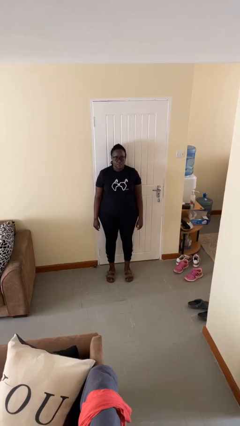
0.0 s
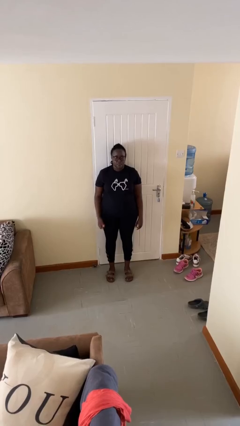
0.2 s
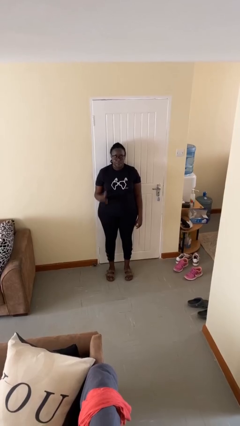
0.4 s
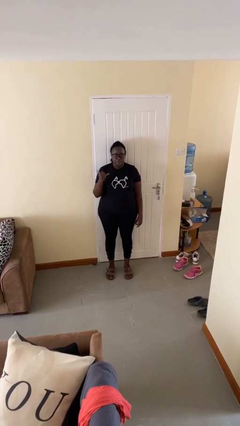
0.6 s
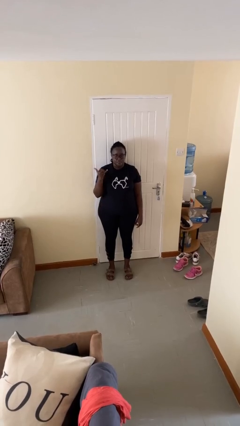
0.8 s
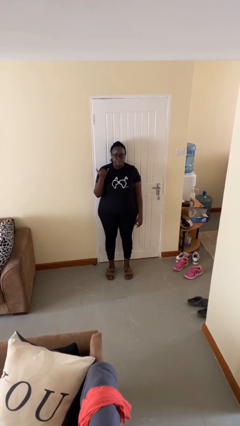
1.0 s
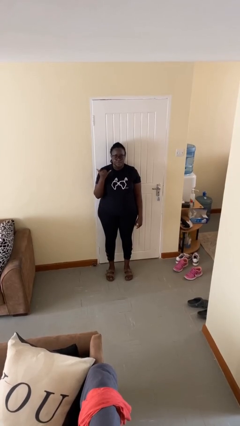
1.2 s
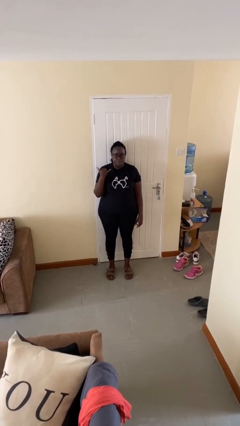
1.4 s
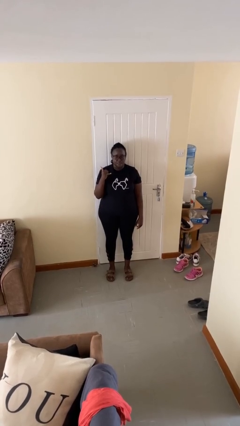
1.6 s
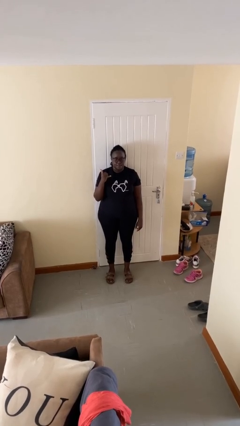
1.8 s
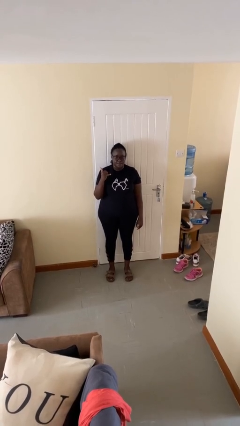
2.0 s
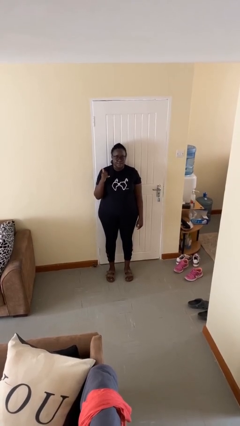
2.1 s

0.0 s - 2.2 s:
person gestures hang loose

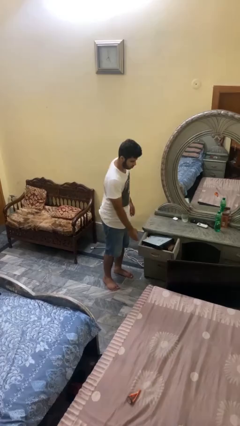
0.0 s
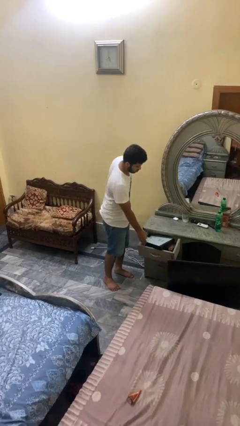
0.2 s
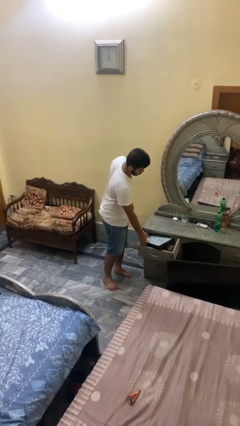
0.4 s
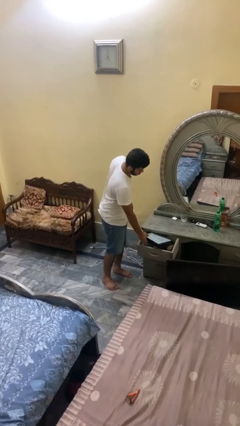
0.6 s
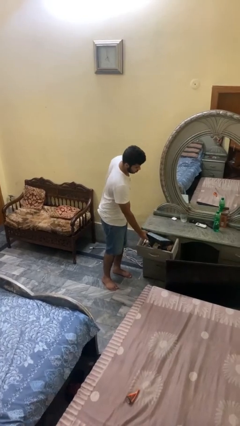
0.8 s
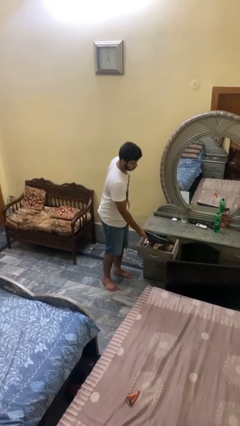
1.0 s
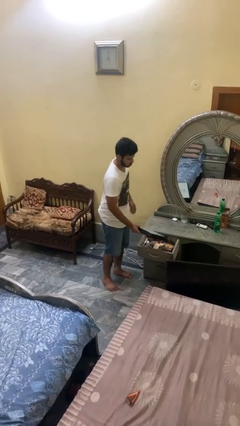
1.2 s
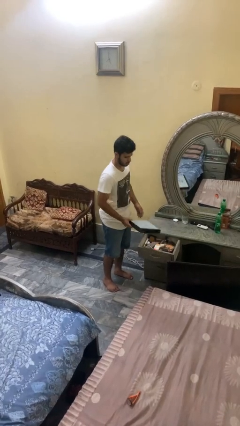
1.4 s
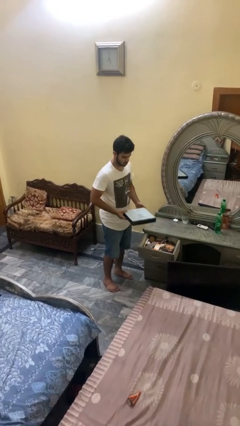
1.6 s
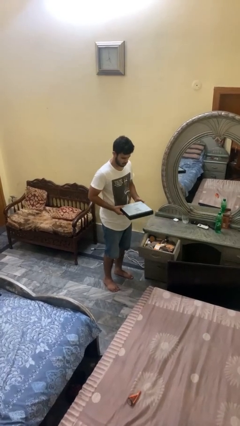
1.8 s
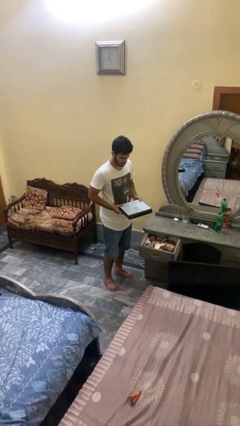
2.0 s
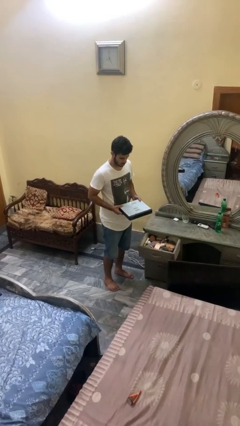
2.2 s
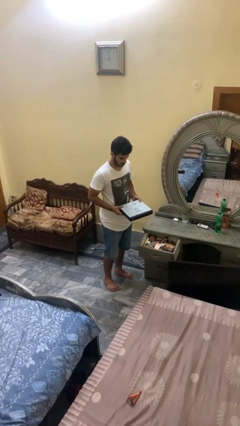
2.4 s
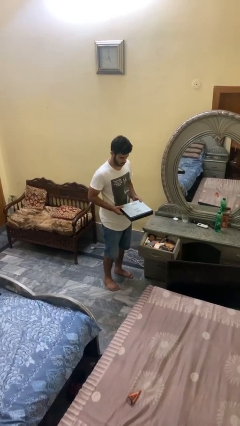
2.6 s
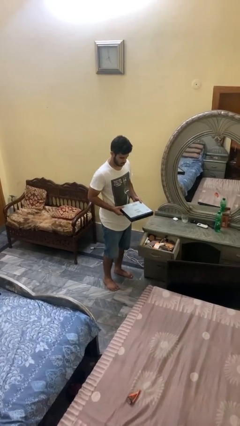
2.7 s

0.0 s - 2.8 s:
person picks up object from cabinet

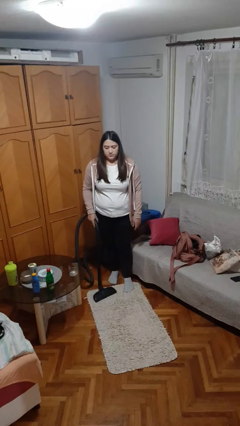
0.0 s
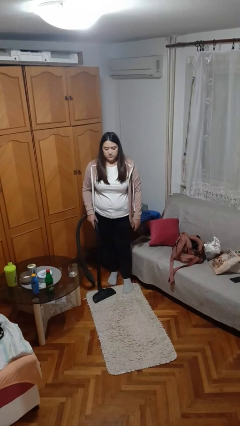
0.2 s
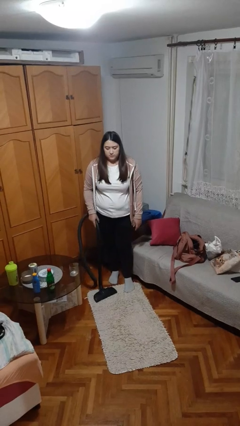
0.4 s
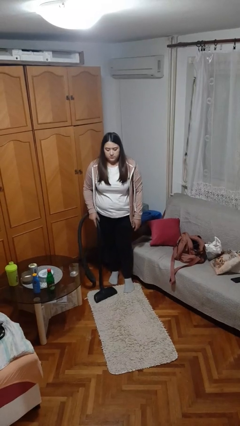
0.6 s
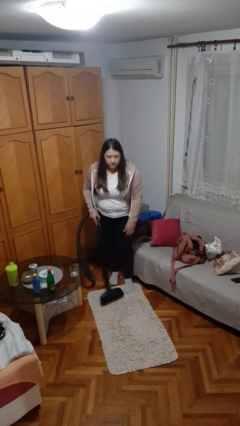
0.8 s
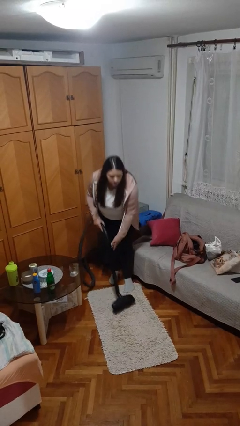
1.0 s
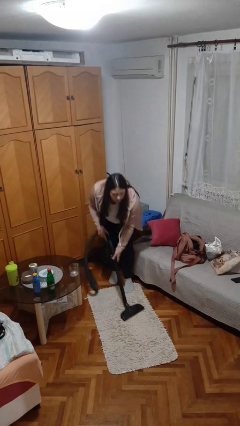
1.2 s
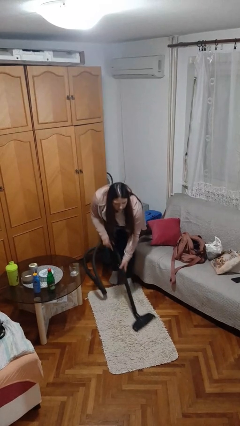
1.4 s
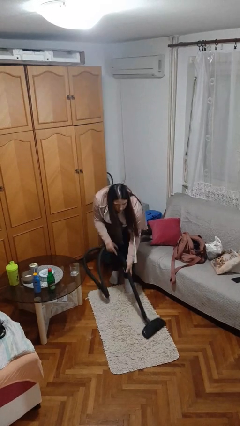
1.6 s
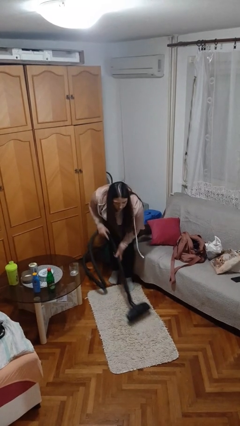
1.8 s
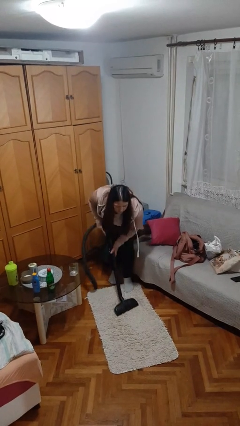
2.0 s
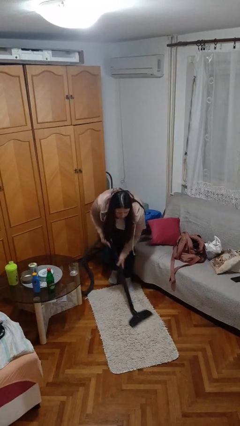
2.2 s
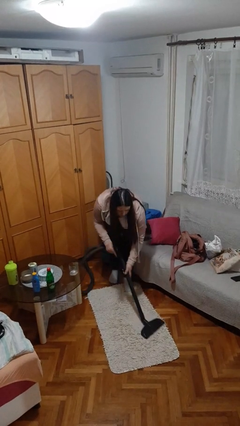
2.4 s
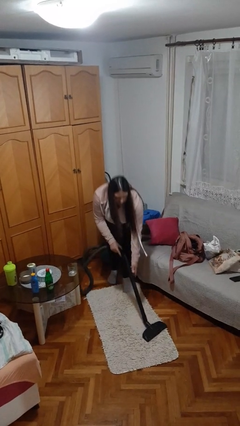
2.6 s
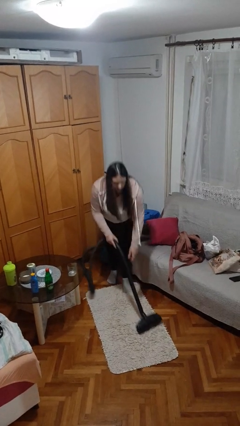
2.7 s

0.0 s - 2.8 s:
person vacuums carpet

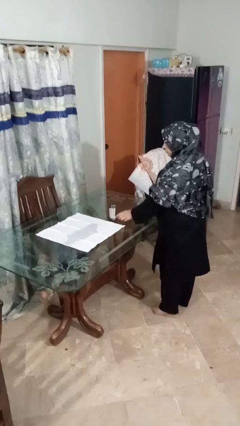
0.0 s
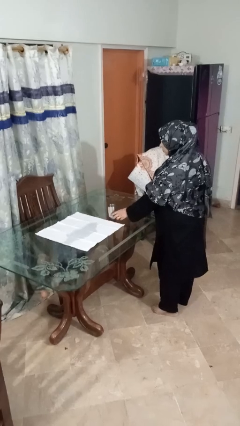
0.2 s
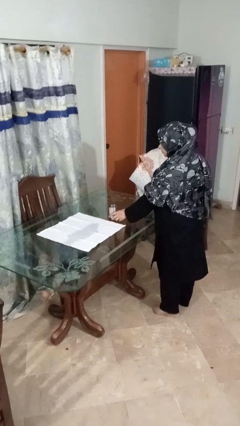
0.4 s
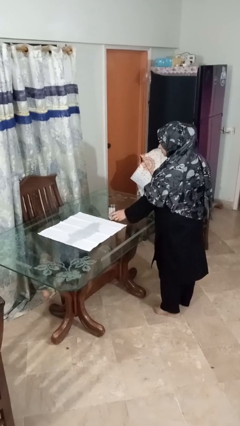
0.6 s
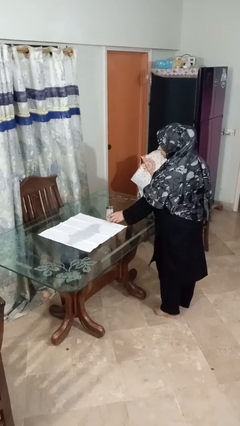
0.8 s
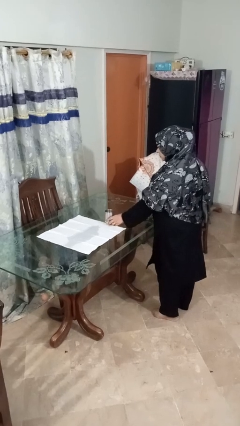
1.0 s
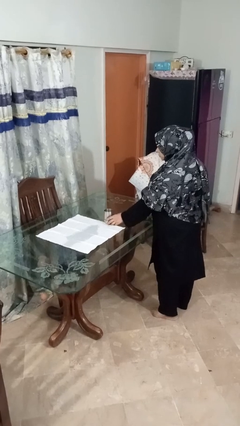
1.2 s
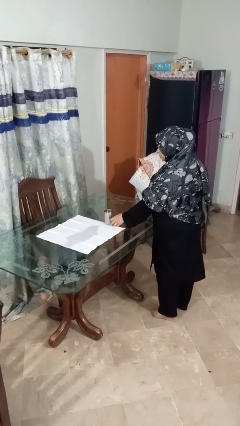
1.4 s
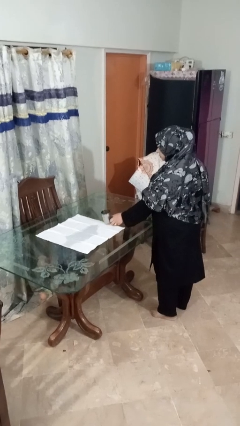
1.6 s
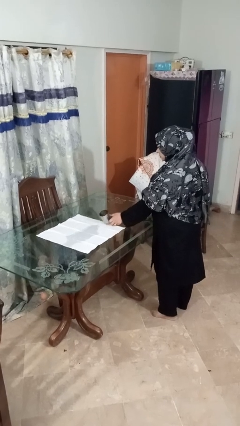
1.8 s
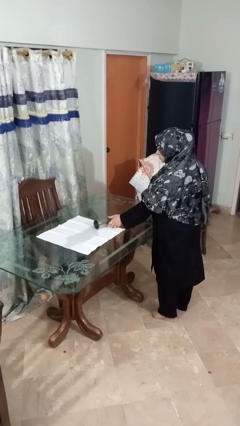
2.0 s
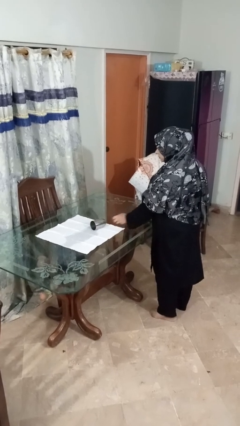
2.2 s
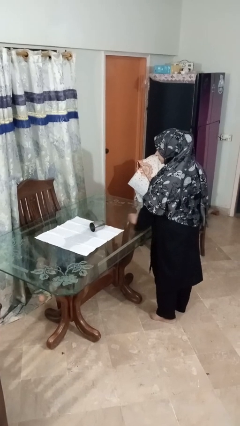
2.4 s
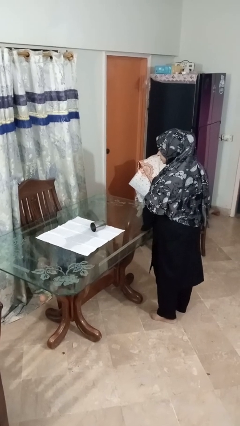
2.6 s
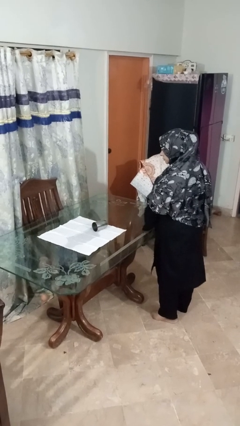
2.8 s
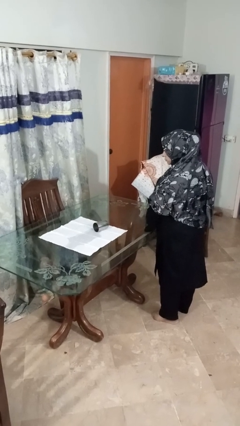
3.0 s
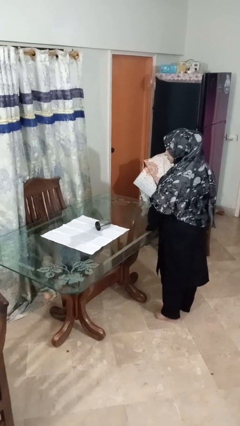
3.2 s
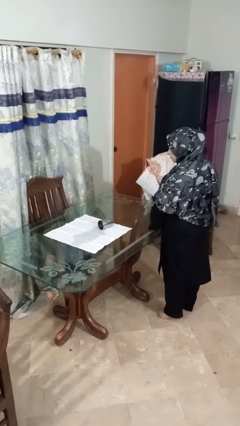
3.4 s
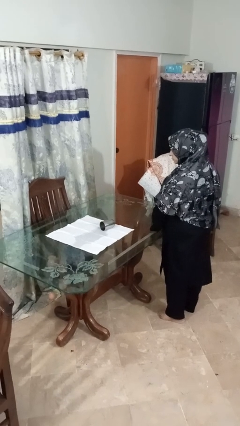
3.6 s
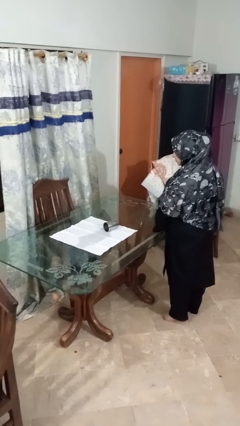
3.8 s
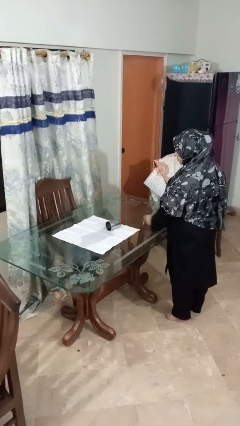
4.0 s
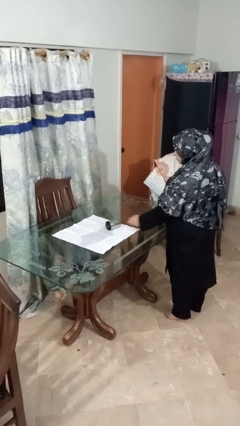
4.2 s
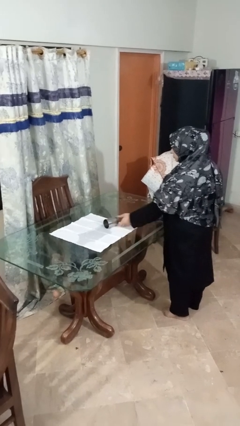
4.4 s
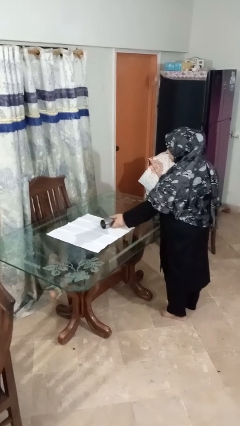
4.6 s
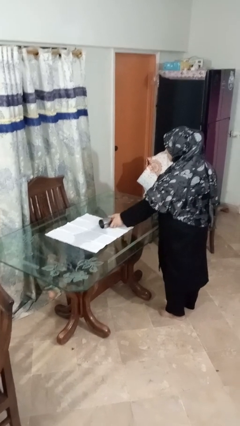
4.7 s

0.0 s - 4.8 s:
person spills on table

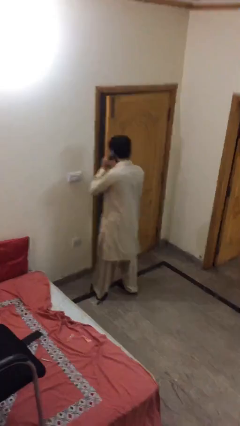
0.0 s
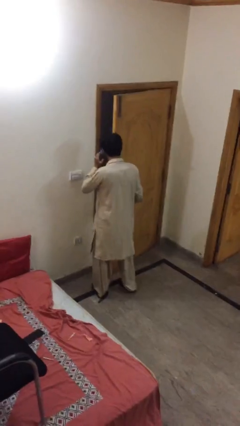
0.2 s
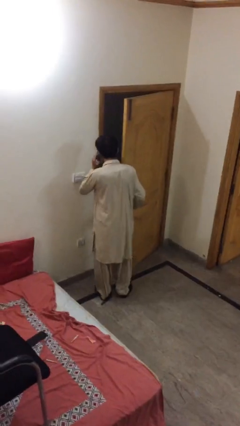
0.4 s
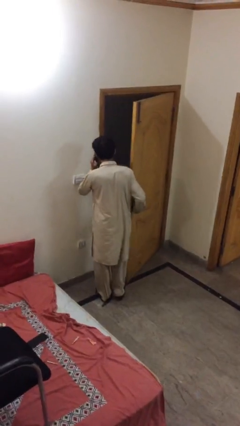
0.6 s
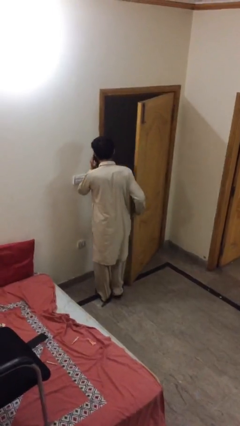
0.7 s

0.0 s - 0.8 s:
person opens facility door

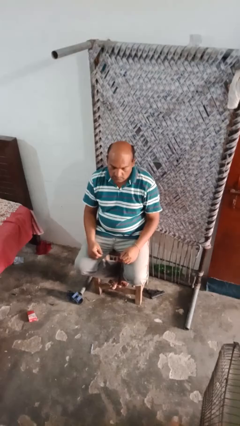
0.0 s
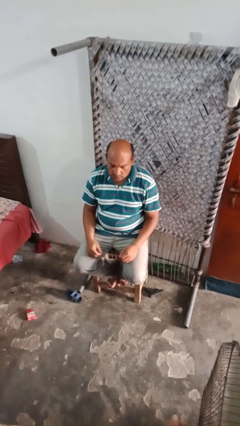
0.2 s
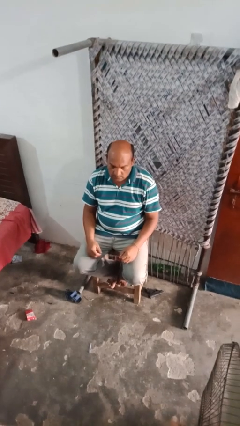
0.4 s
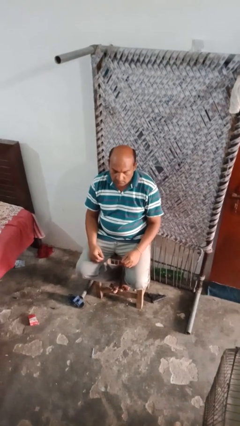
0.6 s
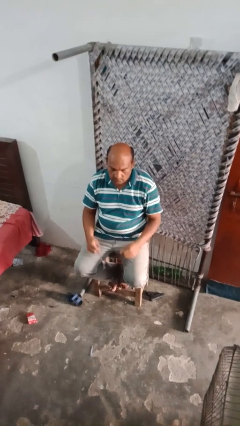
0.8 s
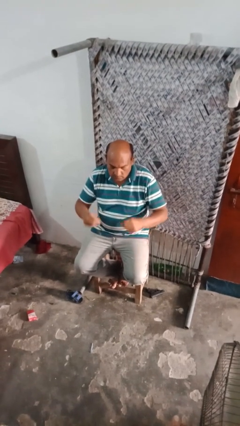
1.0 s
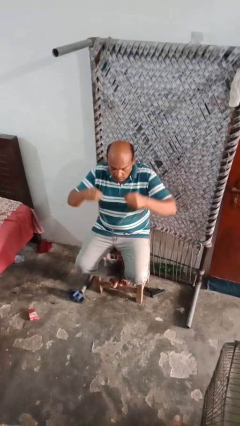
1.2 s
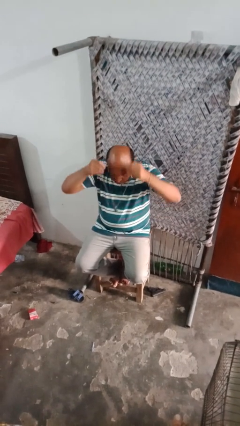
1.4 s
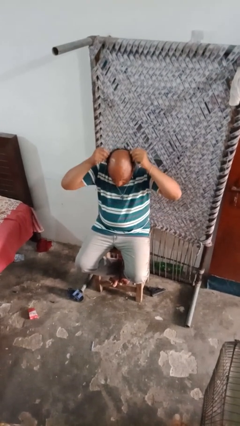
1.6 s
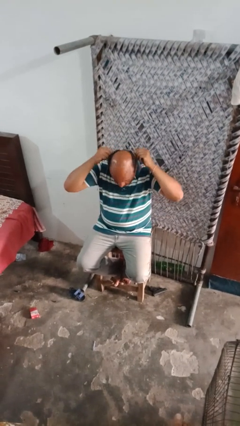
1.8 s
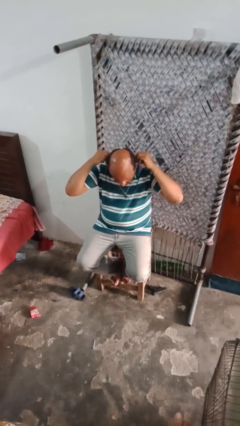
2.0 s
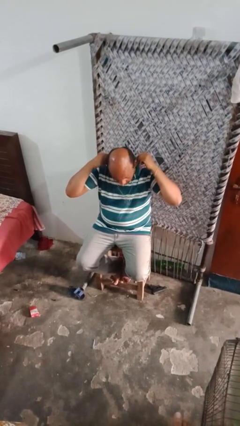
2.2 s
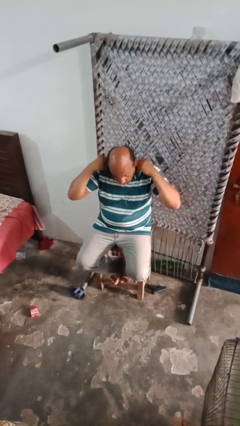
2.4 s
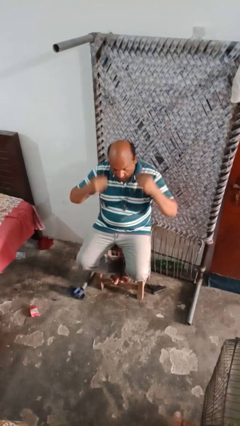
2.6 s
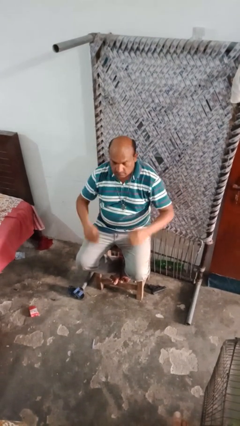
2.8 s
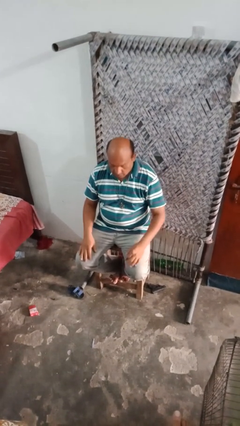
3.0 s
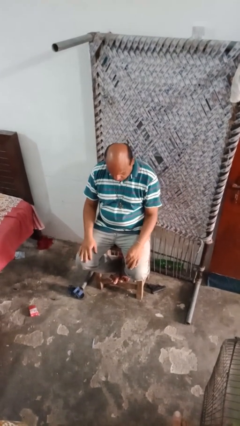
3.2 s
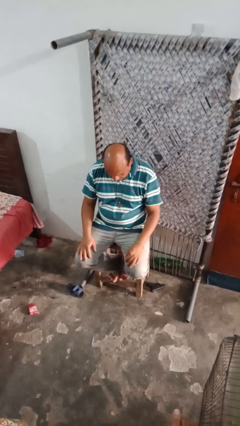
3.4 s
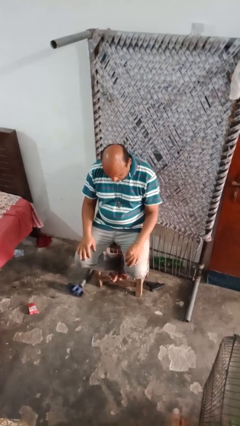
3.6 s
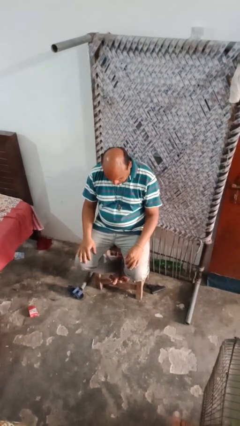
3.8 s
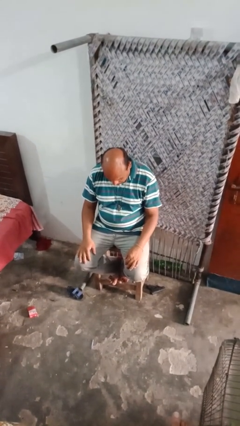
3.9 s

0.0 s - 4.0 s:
person puts on necklace
